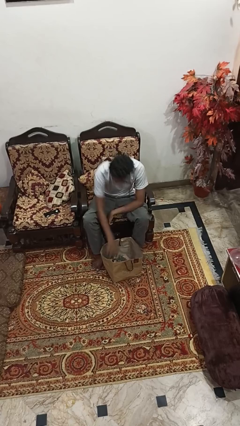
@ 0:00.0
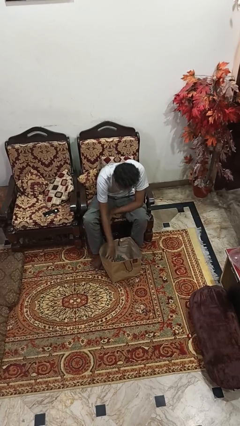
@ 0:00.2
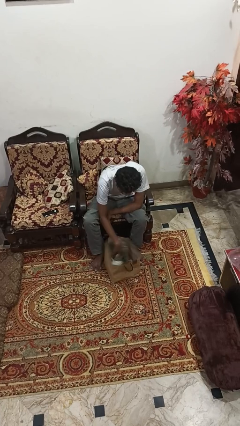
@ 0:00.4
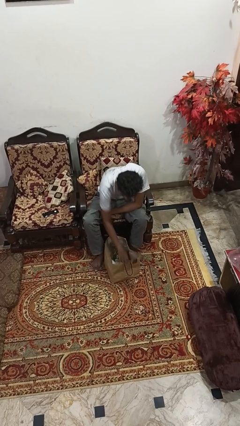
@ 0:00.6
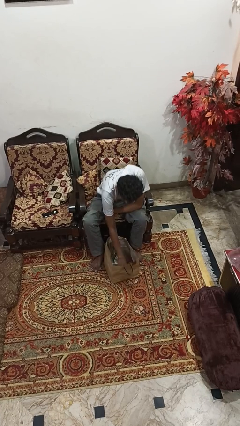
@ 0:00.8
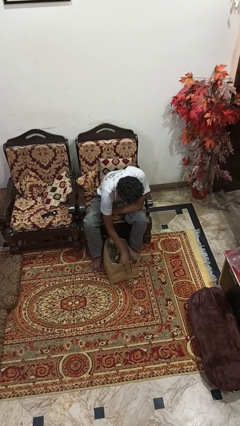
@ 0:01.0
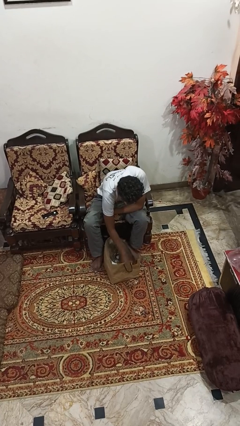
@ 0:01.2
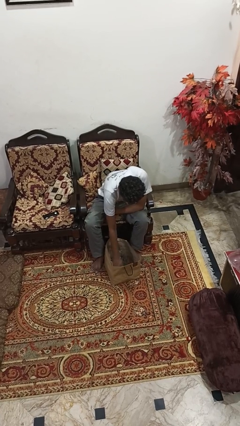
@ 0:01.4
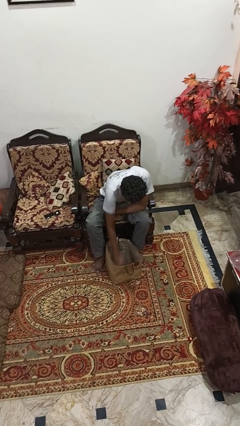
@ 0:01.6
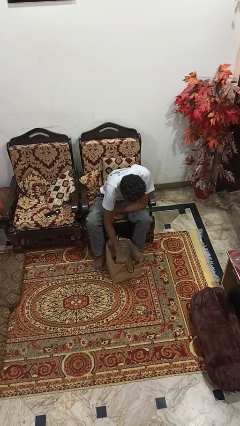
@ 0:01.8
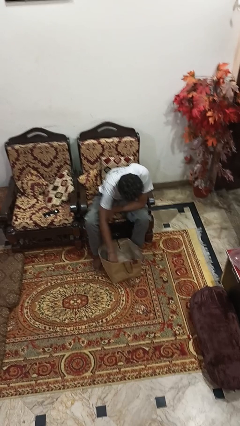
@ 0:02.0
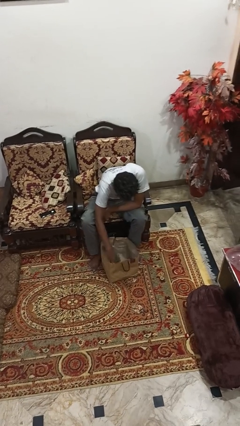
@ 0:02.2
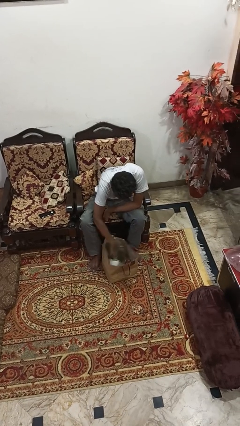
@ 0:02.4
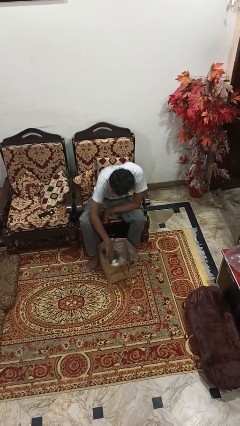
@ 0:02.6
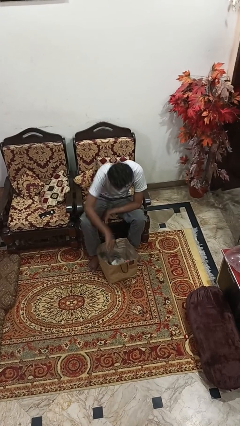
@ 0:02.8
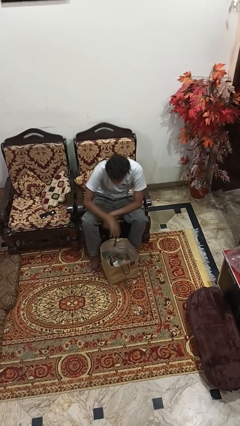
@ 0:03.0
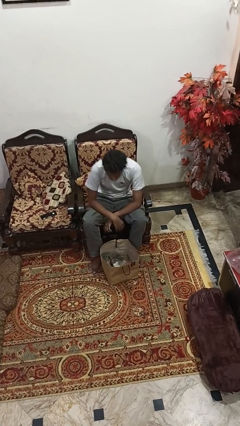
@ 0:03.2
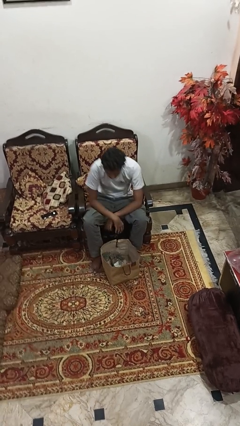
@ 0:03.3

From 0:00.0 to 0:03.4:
person searches in bag

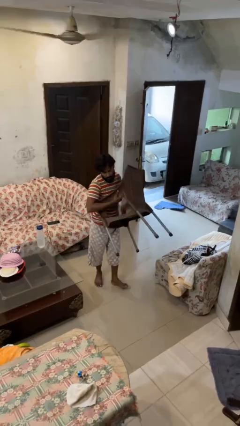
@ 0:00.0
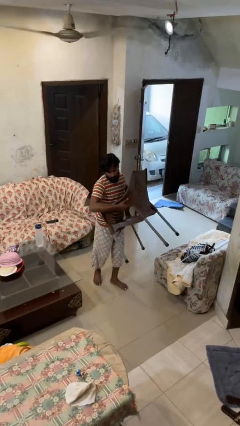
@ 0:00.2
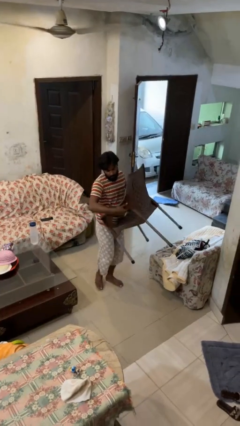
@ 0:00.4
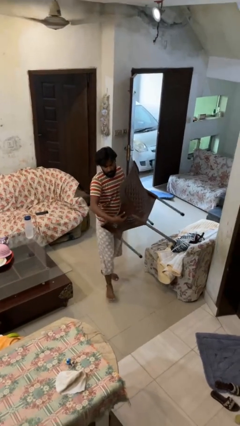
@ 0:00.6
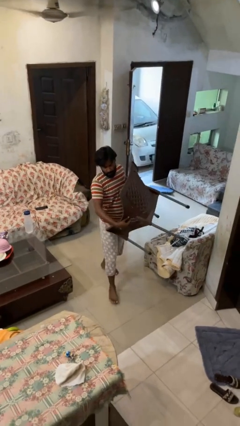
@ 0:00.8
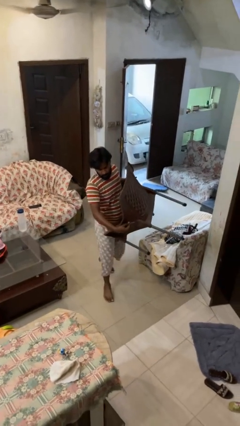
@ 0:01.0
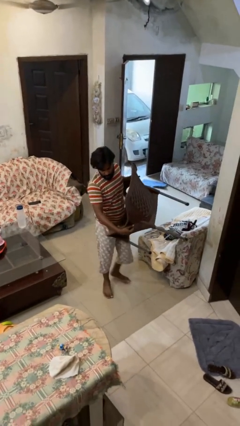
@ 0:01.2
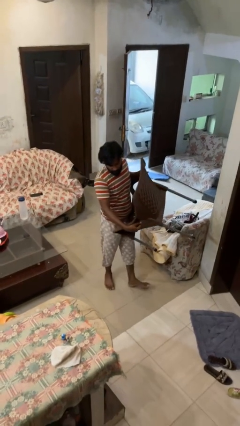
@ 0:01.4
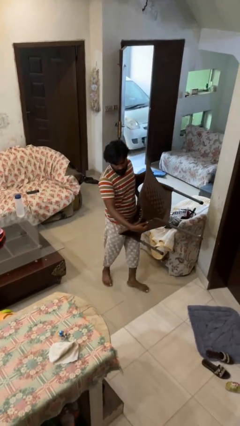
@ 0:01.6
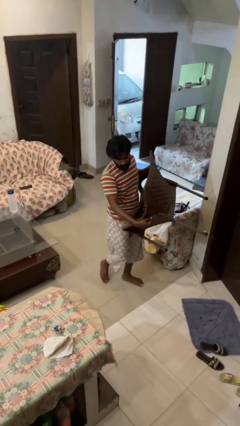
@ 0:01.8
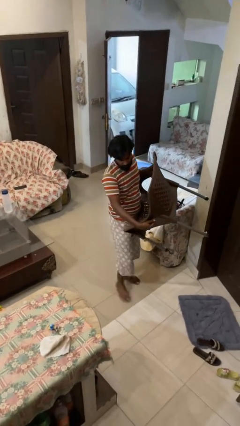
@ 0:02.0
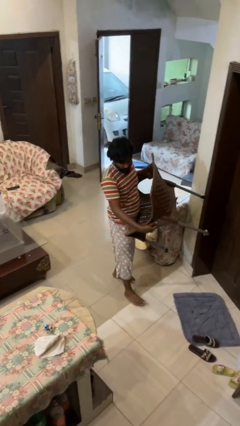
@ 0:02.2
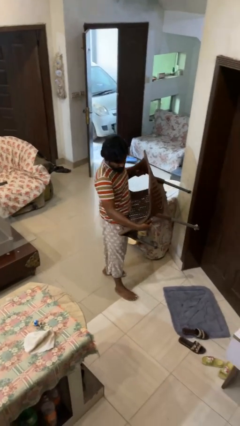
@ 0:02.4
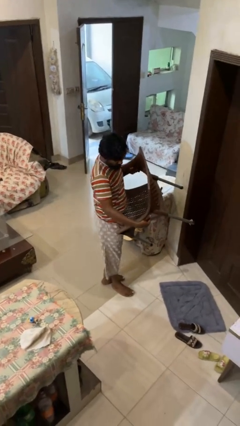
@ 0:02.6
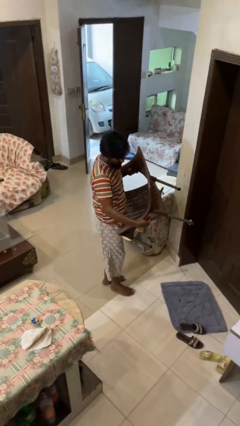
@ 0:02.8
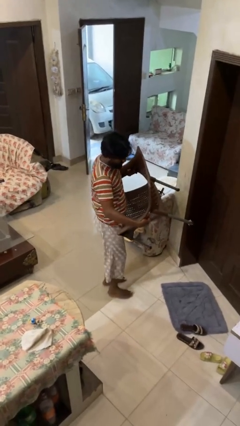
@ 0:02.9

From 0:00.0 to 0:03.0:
person carries furniture

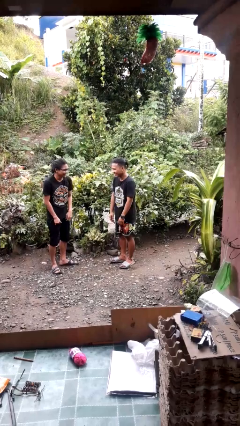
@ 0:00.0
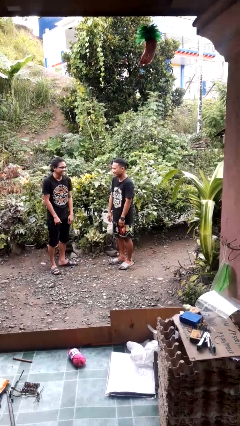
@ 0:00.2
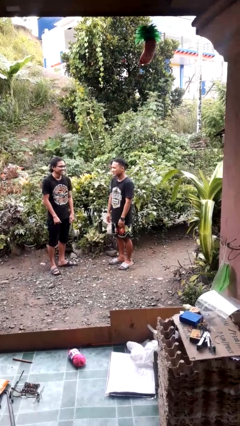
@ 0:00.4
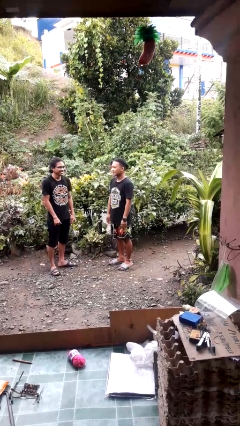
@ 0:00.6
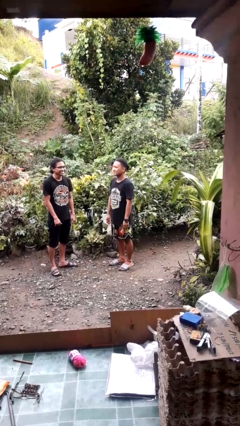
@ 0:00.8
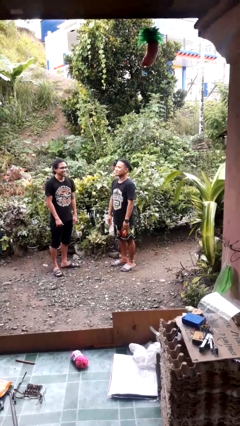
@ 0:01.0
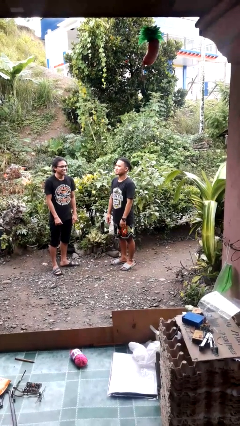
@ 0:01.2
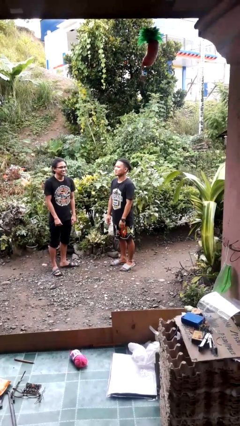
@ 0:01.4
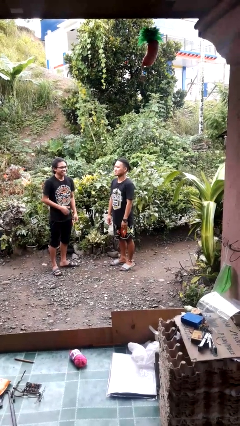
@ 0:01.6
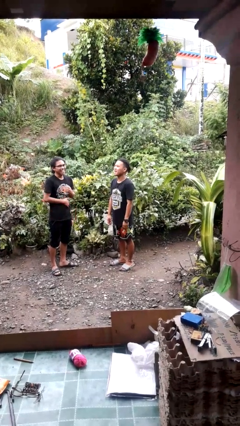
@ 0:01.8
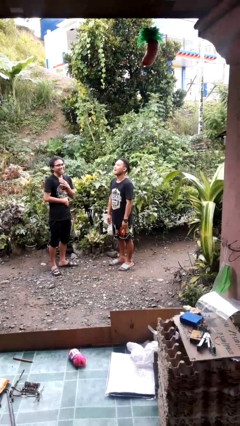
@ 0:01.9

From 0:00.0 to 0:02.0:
person laughs with person

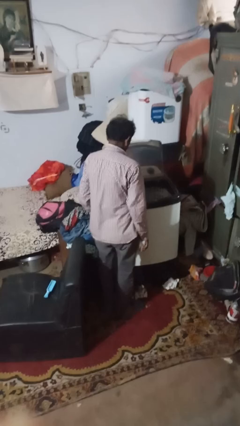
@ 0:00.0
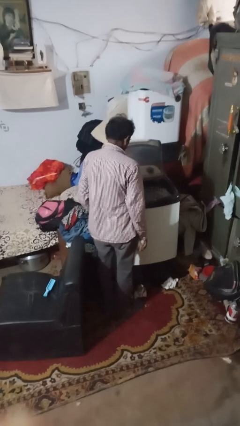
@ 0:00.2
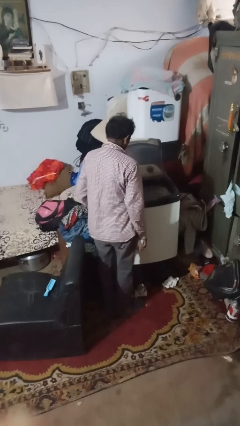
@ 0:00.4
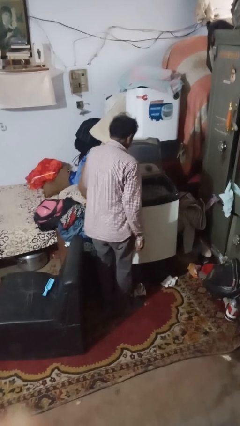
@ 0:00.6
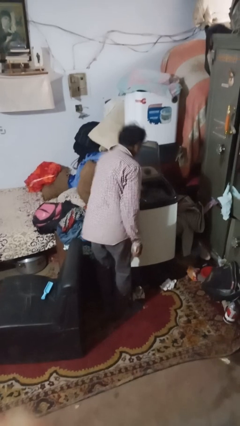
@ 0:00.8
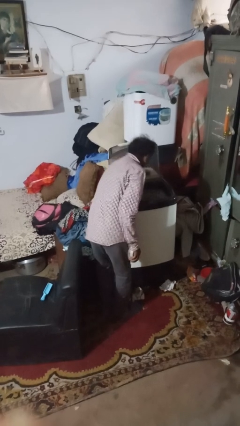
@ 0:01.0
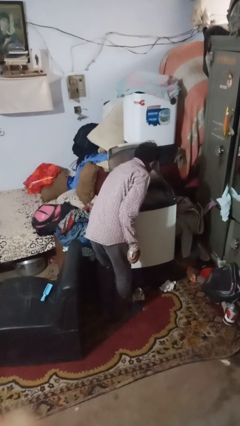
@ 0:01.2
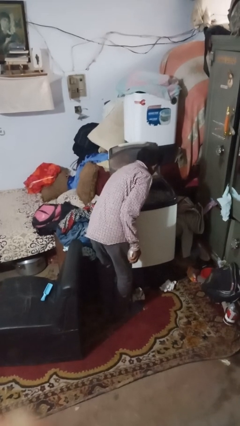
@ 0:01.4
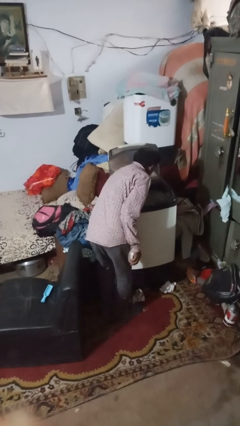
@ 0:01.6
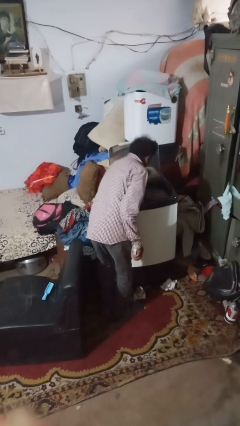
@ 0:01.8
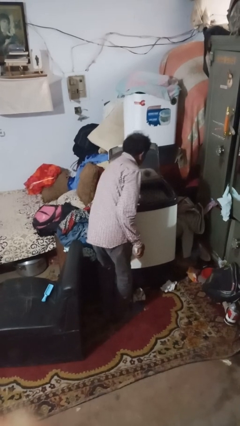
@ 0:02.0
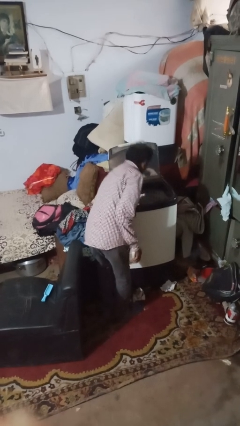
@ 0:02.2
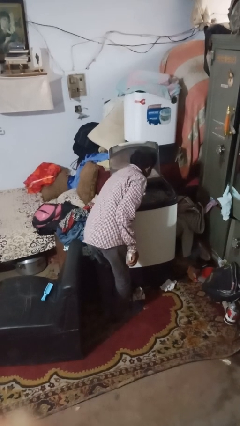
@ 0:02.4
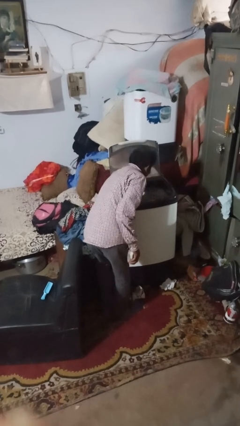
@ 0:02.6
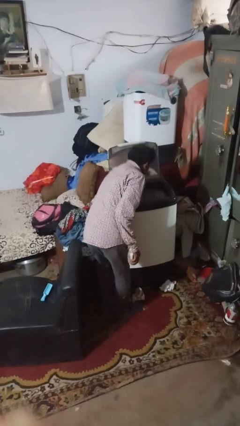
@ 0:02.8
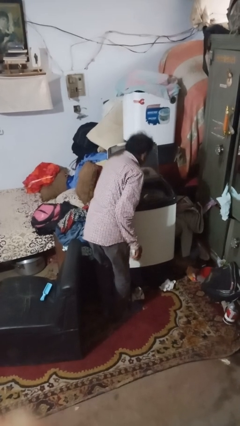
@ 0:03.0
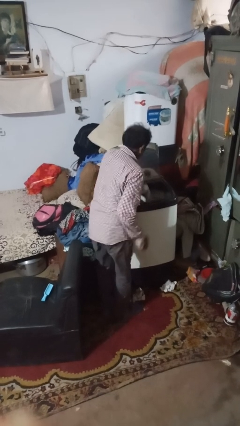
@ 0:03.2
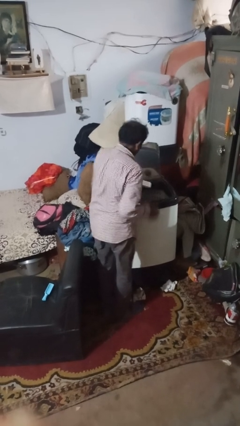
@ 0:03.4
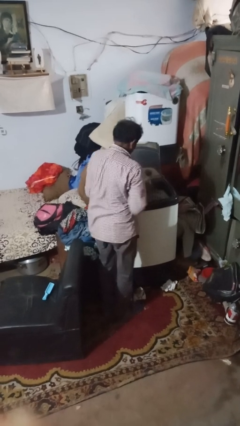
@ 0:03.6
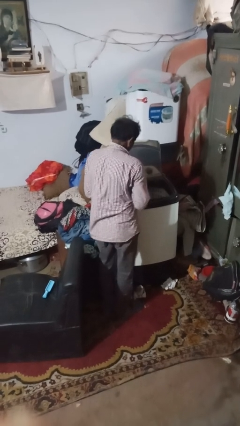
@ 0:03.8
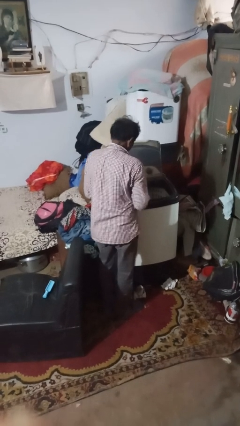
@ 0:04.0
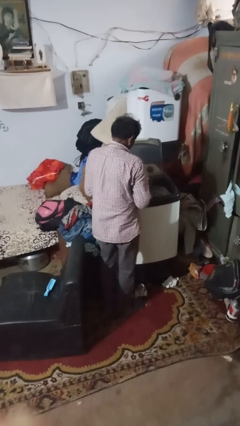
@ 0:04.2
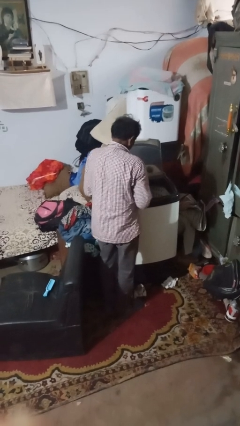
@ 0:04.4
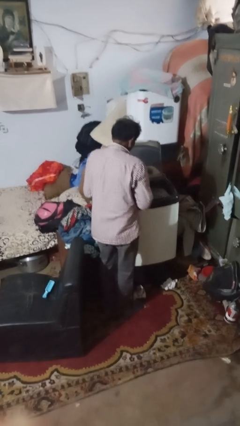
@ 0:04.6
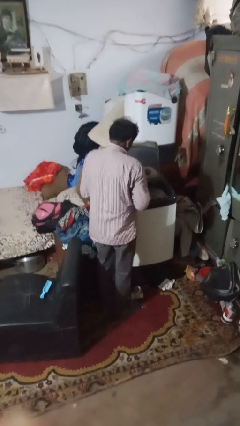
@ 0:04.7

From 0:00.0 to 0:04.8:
person cleans dryer lint trap

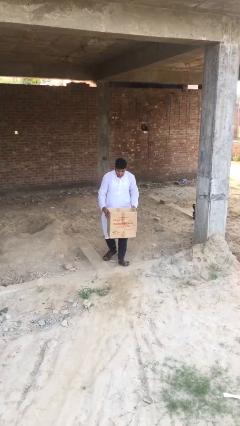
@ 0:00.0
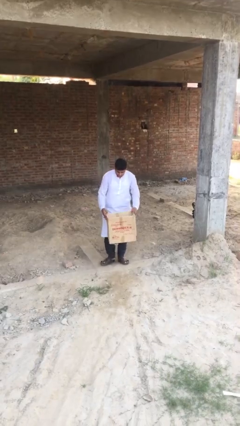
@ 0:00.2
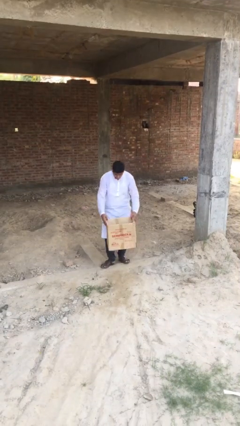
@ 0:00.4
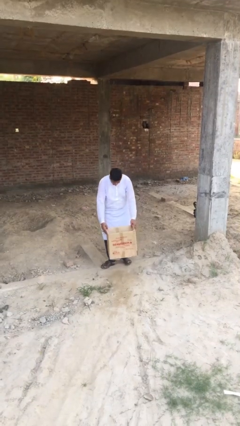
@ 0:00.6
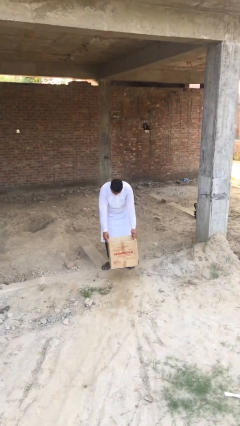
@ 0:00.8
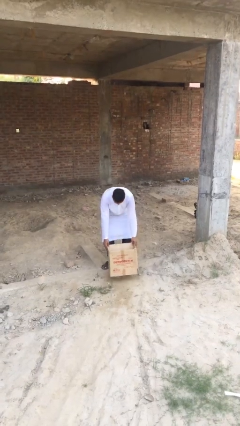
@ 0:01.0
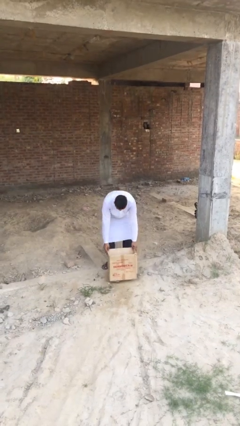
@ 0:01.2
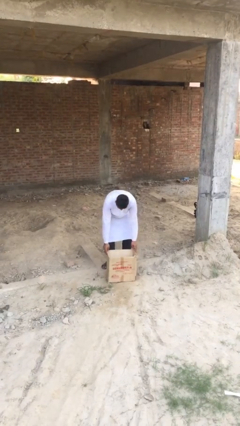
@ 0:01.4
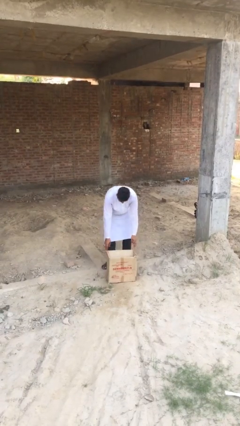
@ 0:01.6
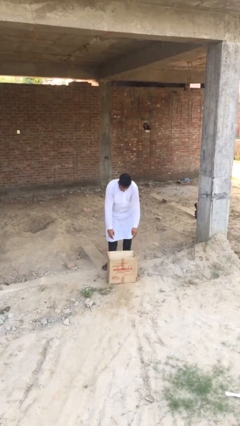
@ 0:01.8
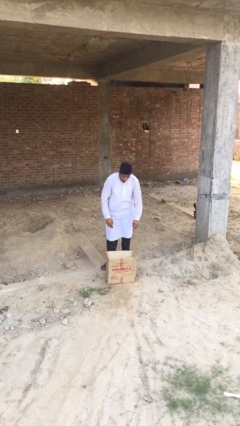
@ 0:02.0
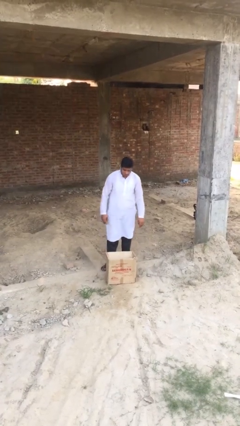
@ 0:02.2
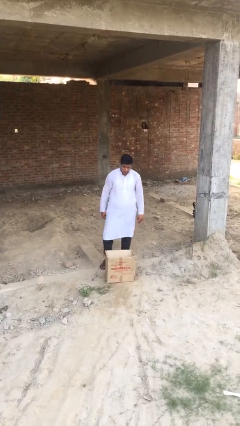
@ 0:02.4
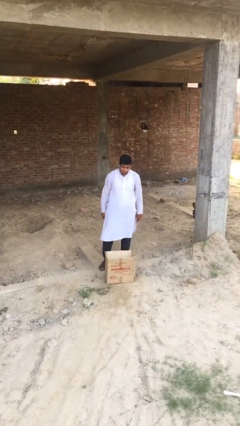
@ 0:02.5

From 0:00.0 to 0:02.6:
person puts down object on floor

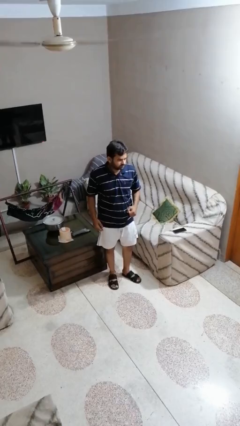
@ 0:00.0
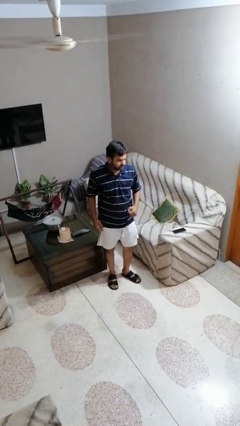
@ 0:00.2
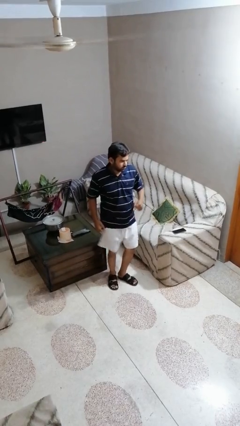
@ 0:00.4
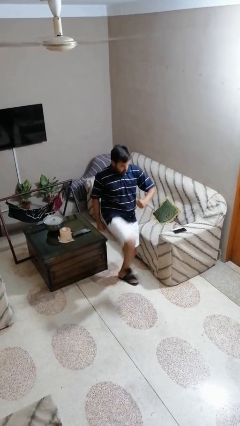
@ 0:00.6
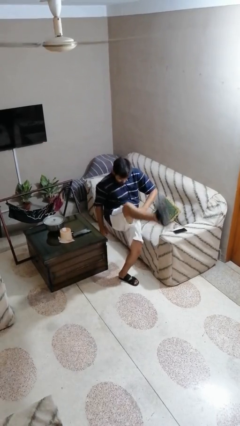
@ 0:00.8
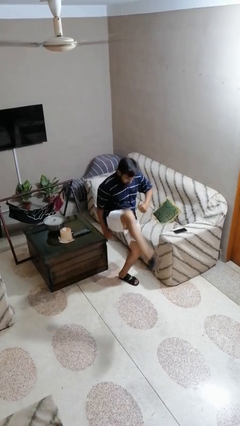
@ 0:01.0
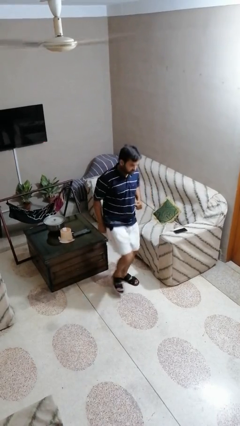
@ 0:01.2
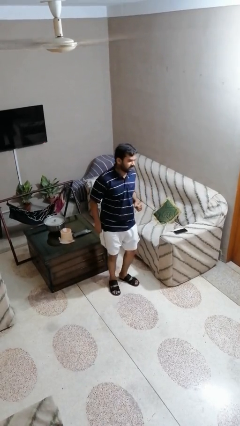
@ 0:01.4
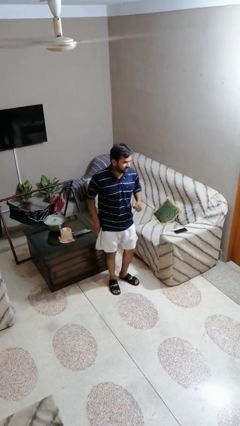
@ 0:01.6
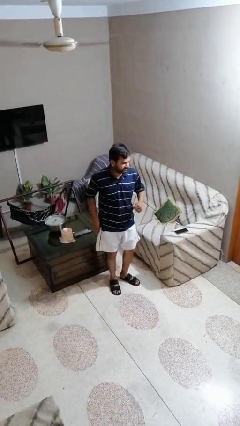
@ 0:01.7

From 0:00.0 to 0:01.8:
person karate kicks
